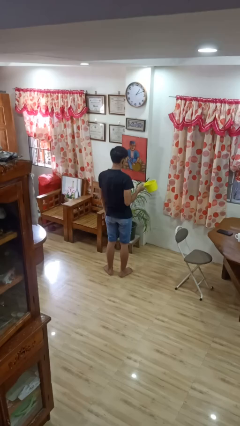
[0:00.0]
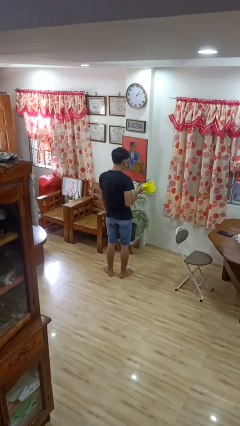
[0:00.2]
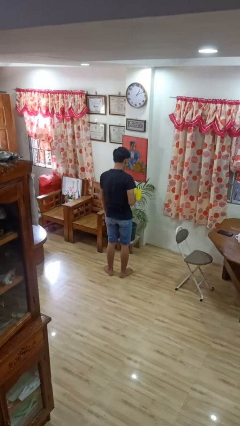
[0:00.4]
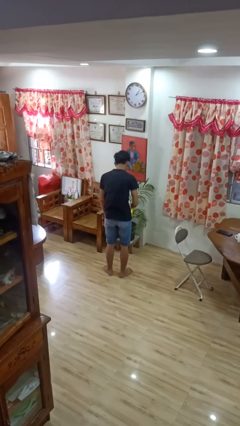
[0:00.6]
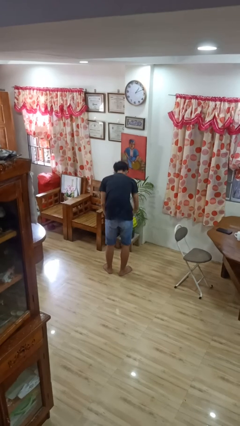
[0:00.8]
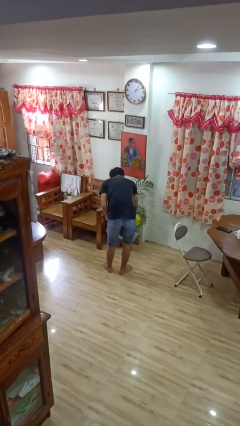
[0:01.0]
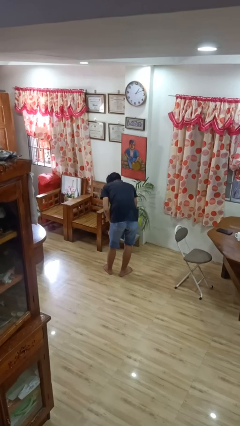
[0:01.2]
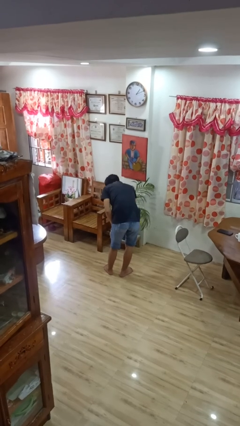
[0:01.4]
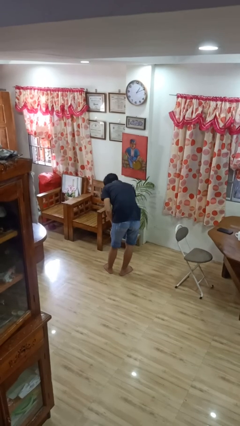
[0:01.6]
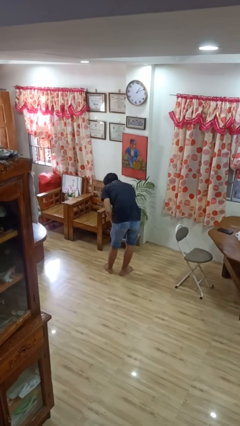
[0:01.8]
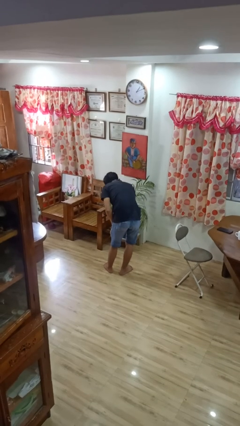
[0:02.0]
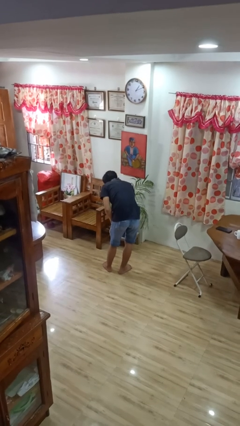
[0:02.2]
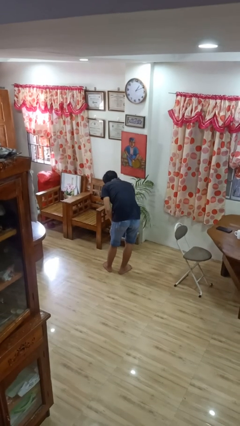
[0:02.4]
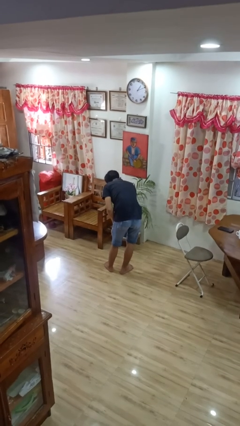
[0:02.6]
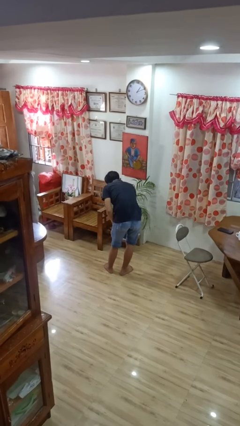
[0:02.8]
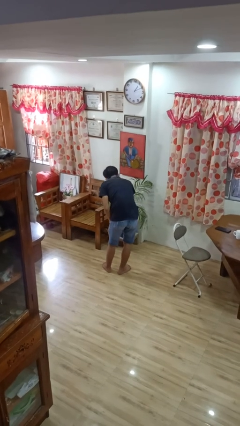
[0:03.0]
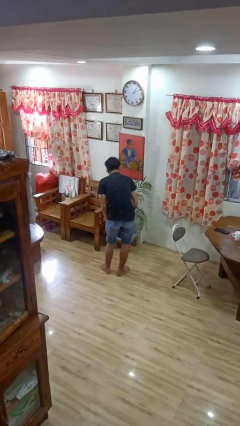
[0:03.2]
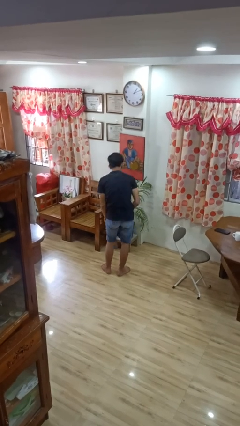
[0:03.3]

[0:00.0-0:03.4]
person waters houseplant

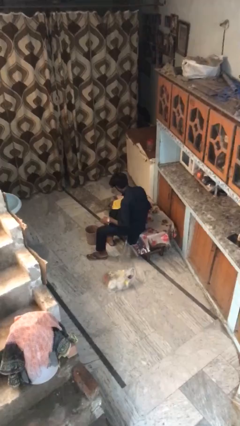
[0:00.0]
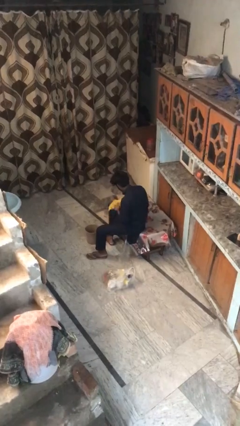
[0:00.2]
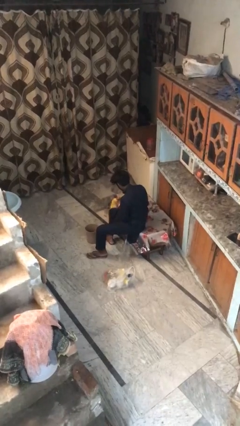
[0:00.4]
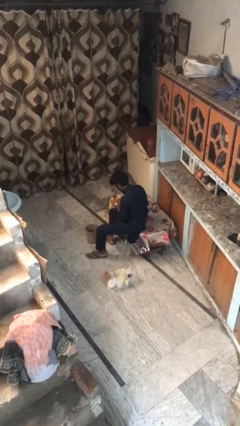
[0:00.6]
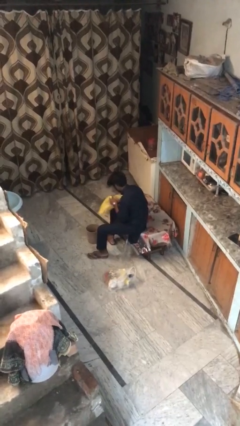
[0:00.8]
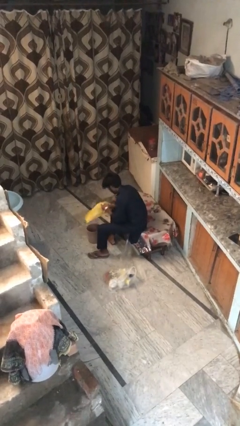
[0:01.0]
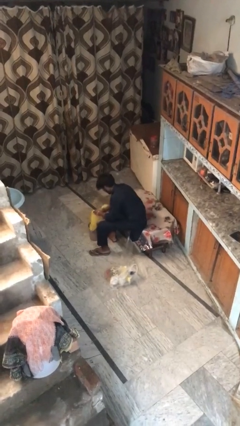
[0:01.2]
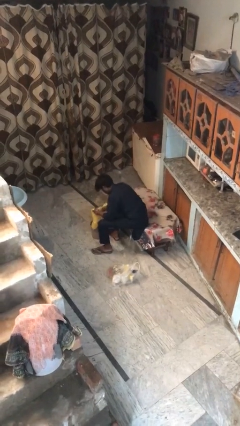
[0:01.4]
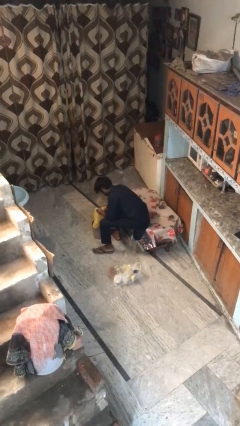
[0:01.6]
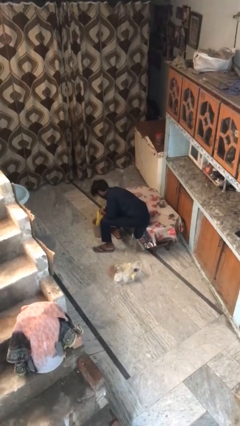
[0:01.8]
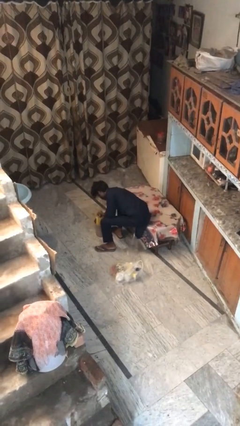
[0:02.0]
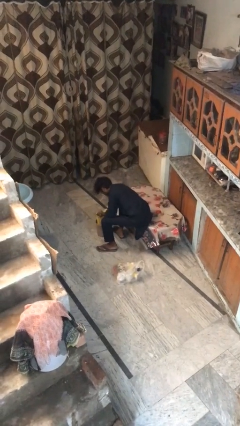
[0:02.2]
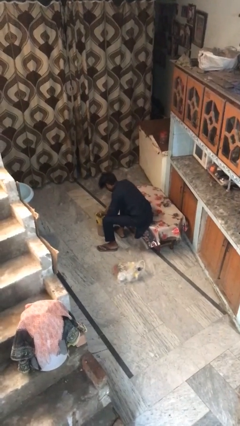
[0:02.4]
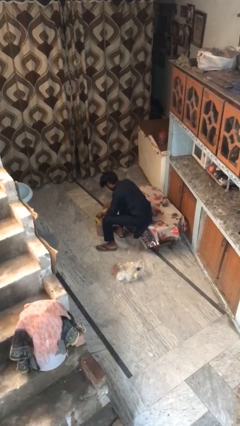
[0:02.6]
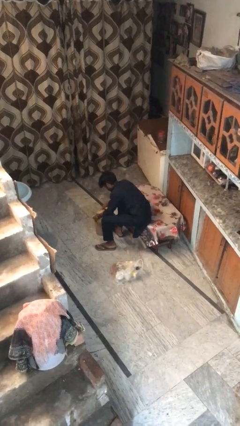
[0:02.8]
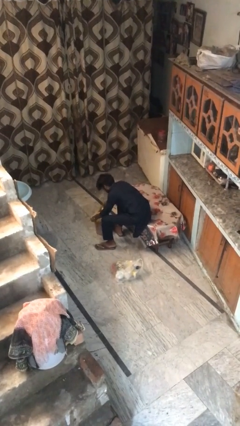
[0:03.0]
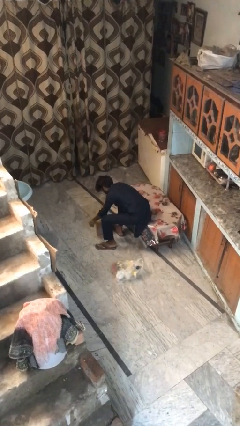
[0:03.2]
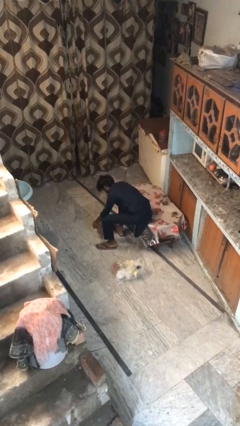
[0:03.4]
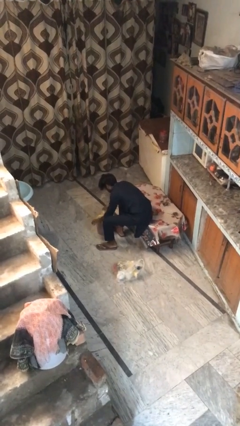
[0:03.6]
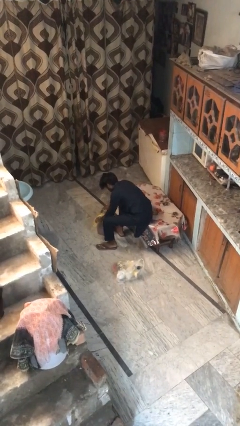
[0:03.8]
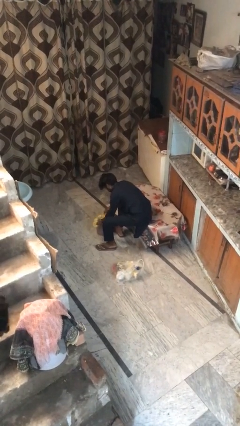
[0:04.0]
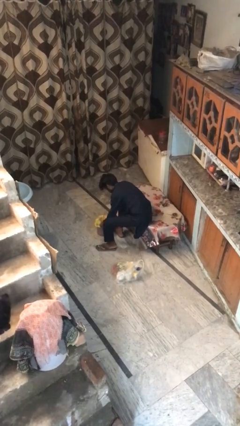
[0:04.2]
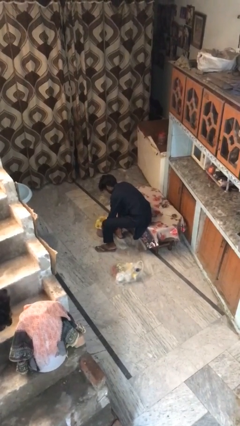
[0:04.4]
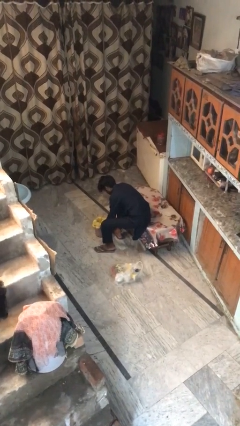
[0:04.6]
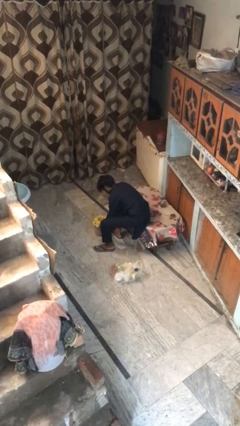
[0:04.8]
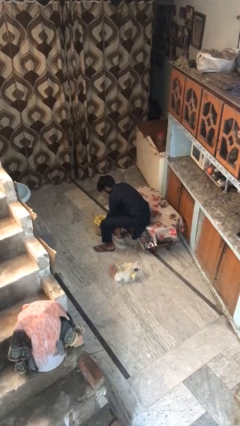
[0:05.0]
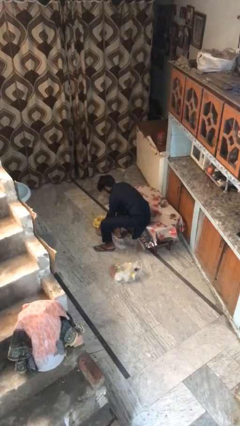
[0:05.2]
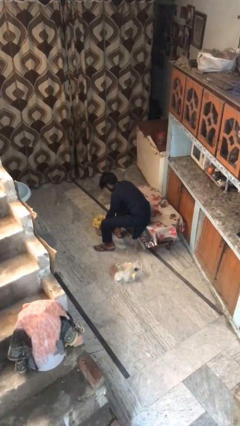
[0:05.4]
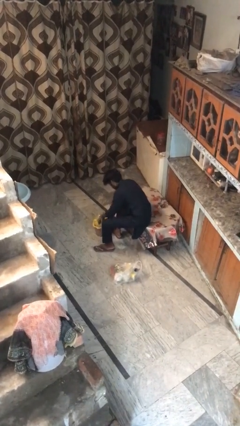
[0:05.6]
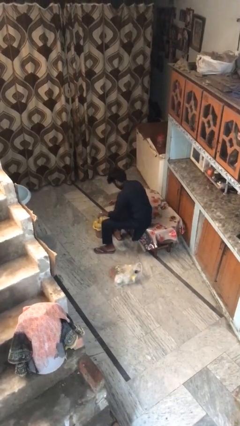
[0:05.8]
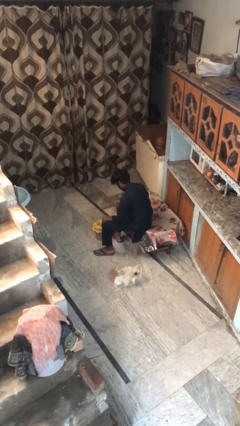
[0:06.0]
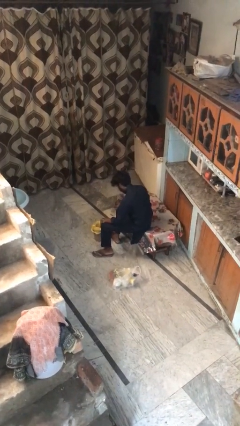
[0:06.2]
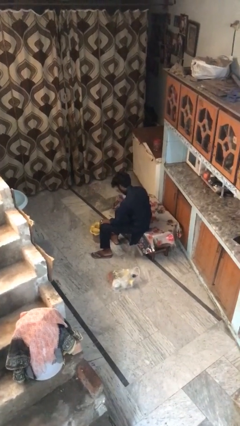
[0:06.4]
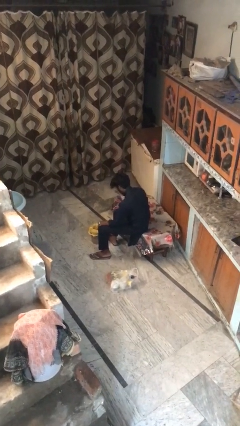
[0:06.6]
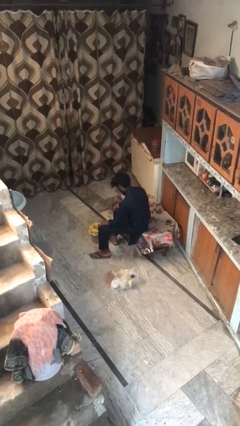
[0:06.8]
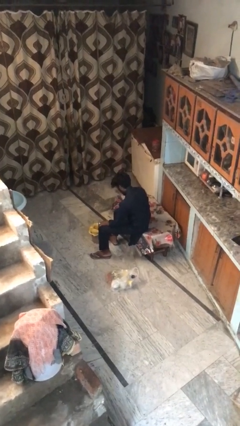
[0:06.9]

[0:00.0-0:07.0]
person inserts trashbag into trashcan

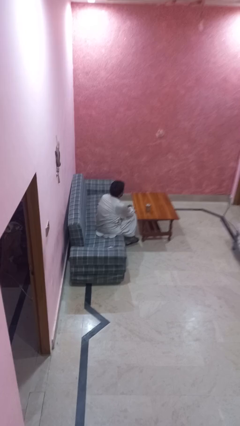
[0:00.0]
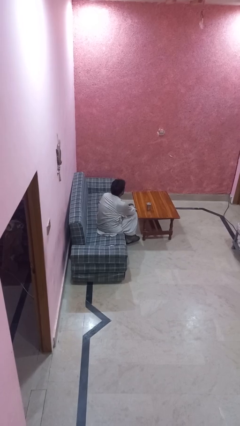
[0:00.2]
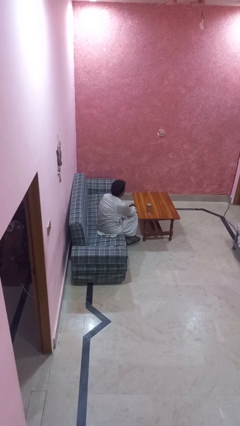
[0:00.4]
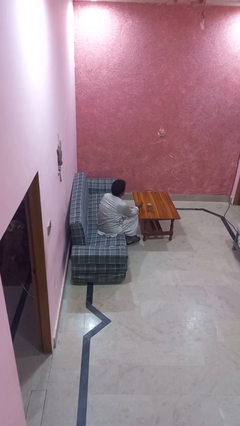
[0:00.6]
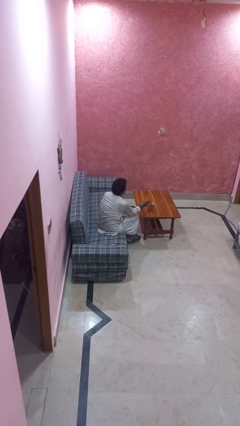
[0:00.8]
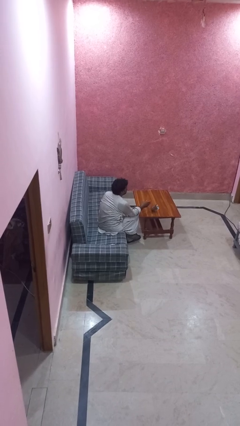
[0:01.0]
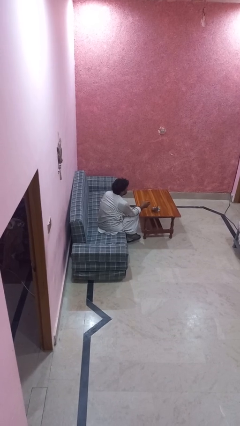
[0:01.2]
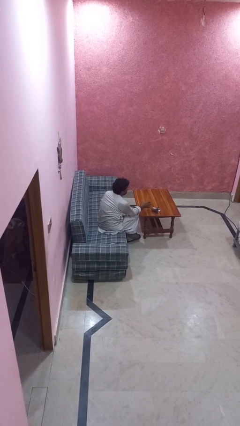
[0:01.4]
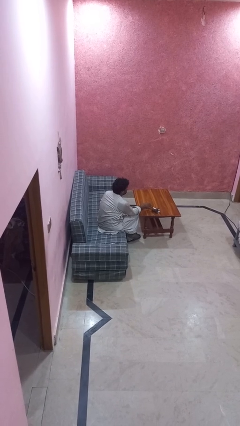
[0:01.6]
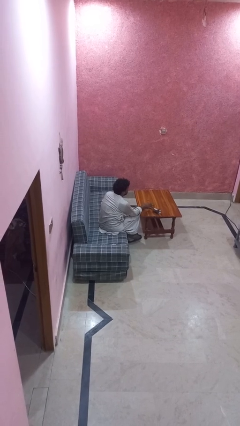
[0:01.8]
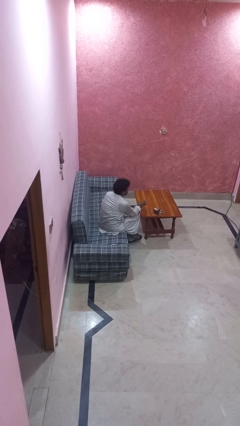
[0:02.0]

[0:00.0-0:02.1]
person knocks over glass

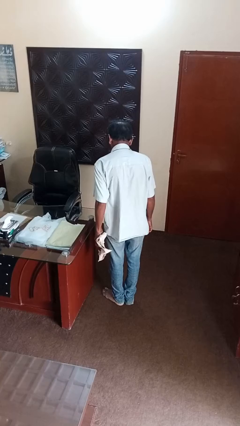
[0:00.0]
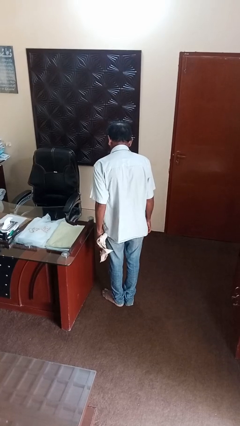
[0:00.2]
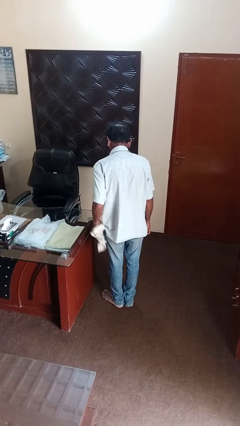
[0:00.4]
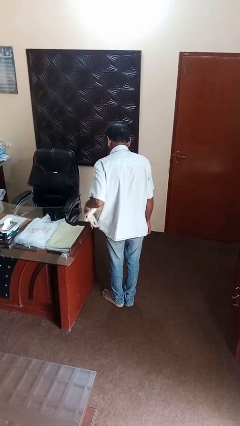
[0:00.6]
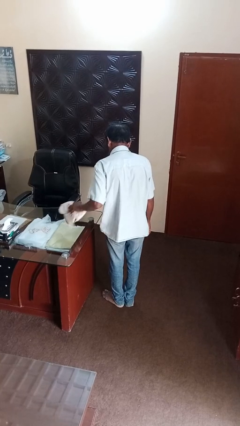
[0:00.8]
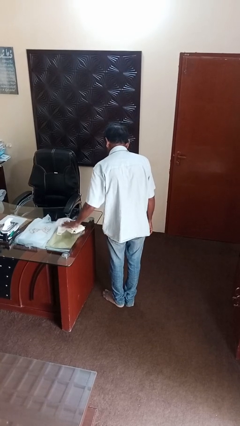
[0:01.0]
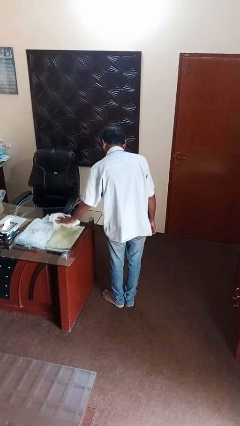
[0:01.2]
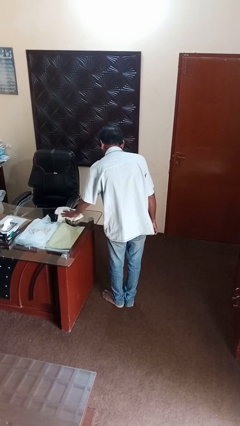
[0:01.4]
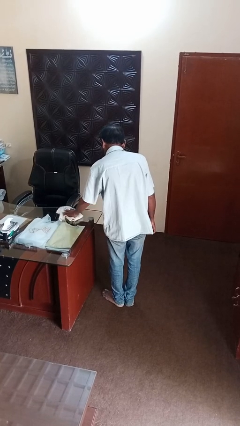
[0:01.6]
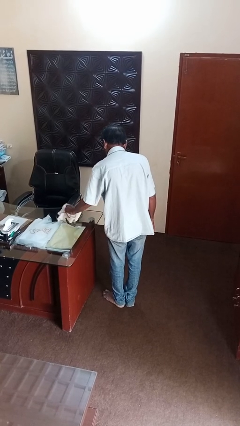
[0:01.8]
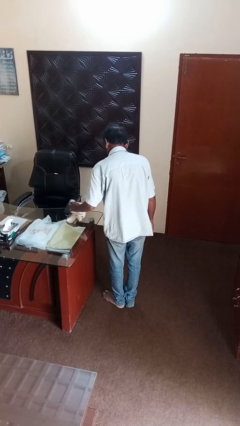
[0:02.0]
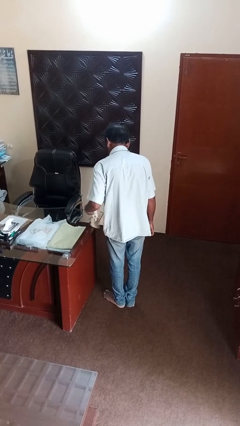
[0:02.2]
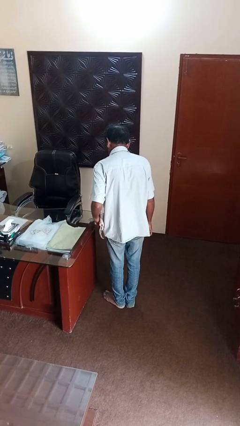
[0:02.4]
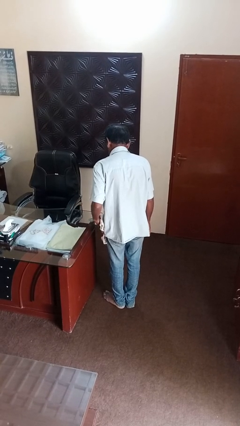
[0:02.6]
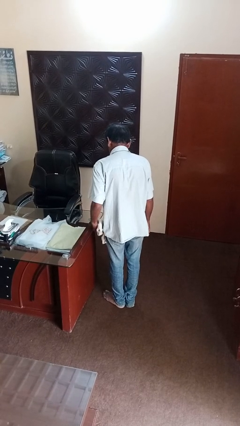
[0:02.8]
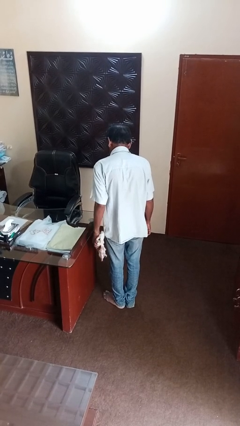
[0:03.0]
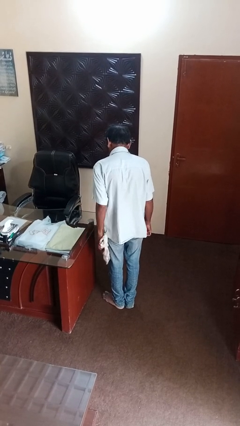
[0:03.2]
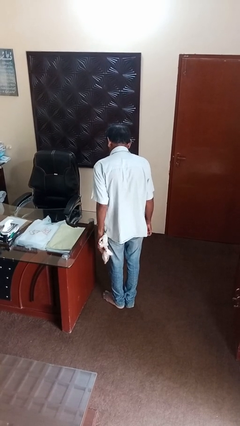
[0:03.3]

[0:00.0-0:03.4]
person cleans table with rag

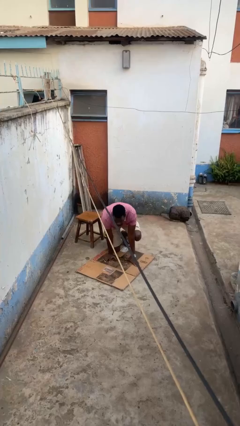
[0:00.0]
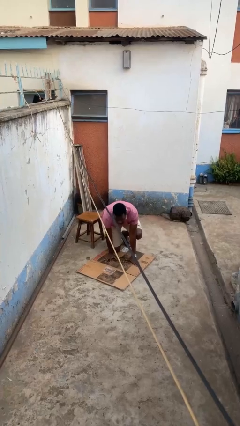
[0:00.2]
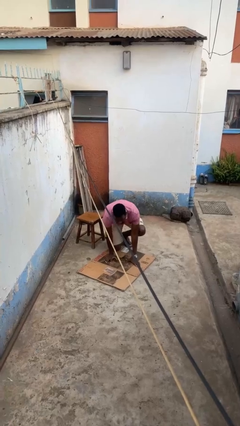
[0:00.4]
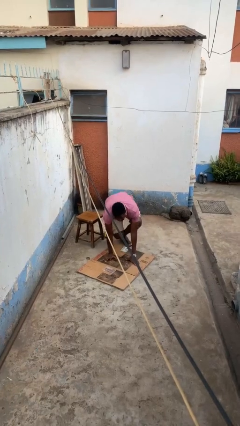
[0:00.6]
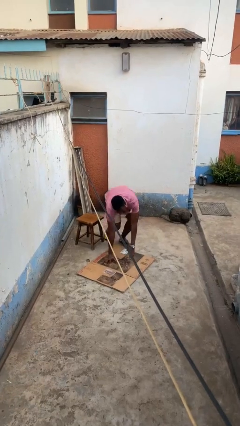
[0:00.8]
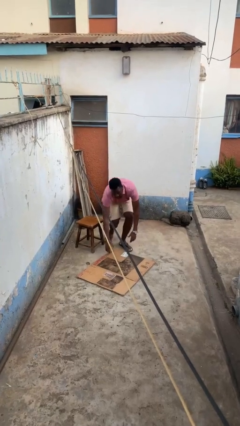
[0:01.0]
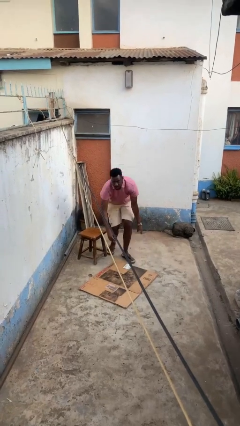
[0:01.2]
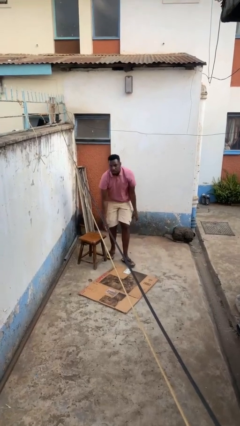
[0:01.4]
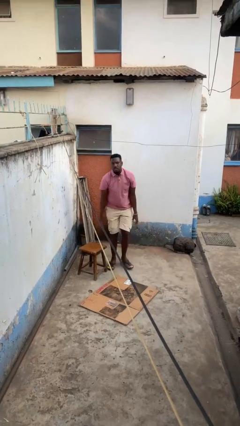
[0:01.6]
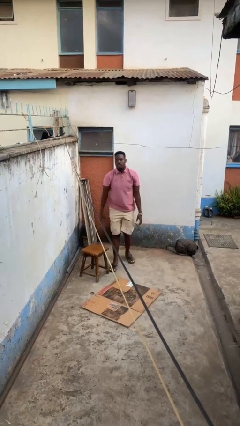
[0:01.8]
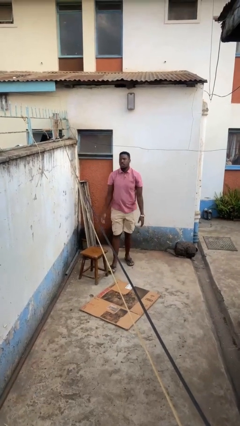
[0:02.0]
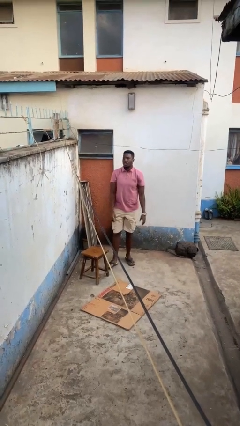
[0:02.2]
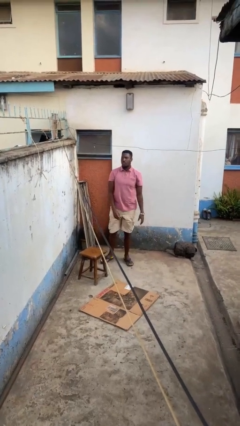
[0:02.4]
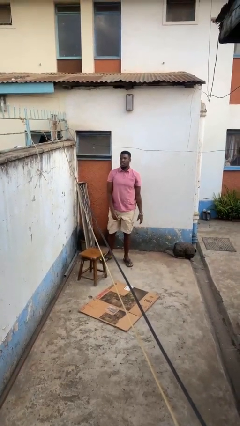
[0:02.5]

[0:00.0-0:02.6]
person stands up from floor
